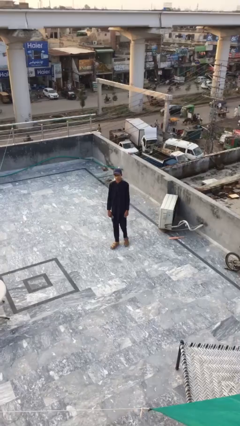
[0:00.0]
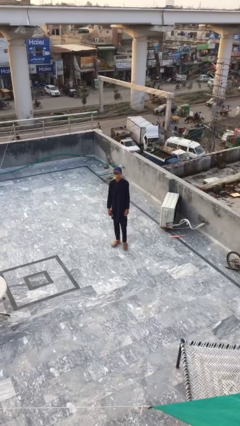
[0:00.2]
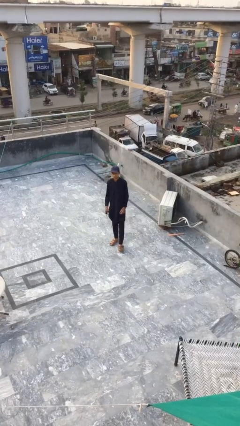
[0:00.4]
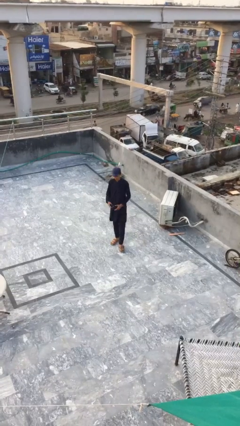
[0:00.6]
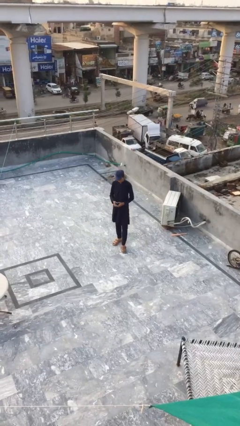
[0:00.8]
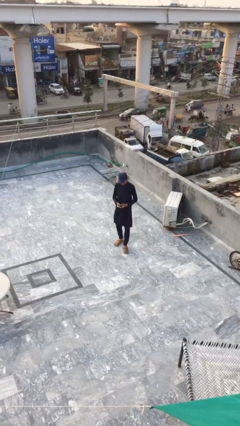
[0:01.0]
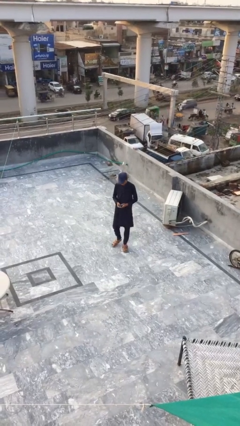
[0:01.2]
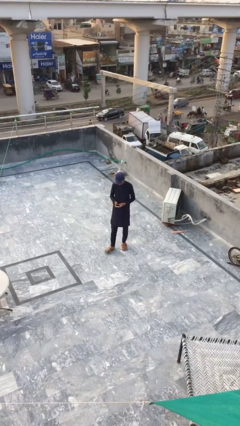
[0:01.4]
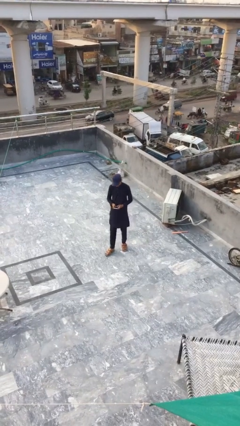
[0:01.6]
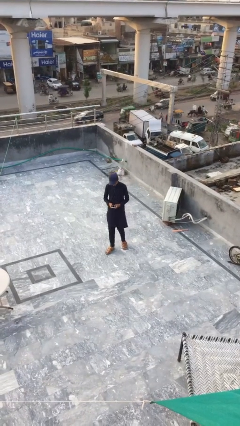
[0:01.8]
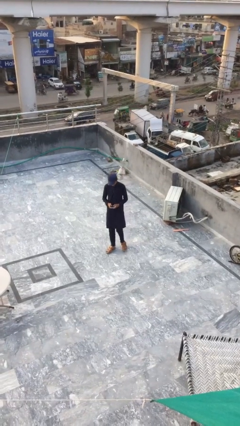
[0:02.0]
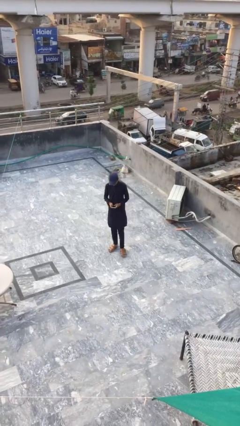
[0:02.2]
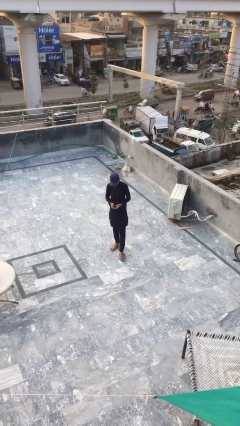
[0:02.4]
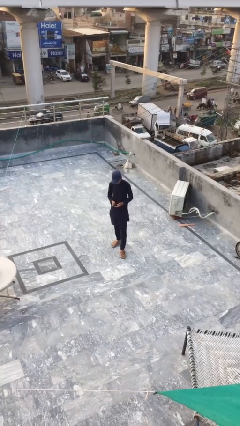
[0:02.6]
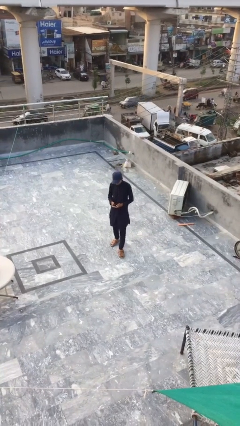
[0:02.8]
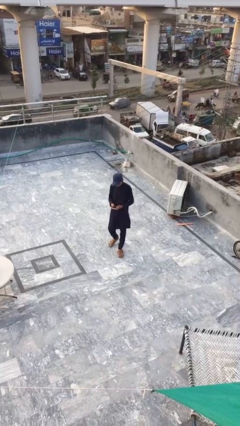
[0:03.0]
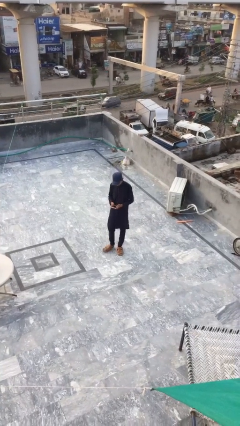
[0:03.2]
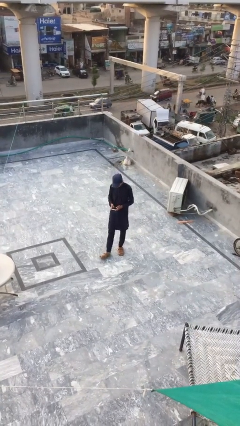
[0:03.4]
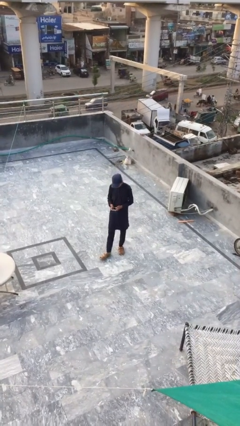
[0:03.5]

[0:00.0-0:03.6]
person texts on phone

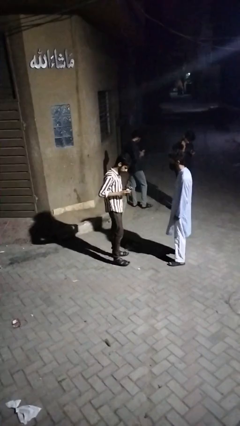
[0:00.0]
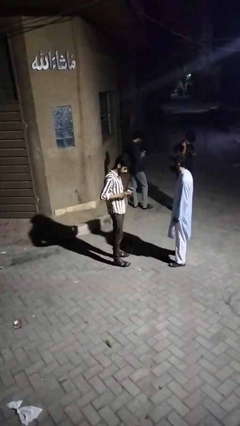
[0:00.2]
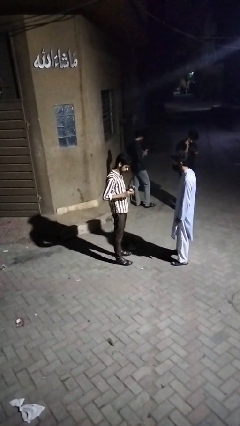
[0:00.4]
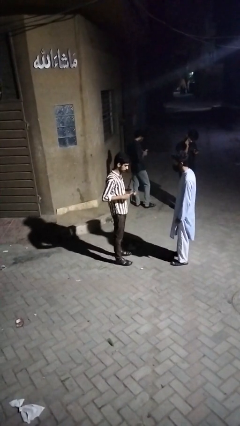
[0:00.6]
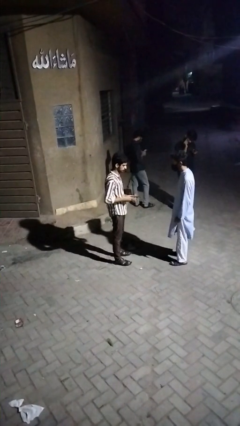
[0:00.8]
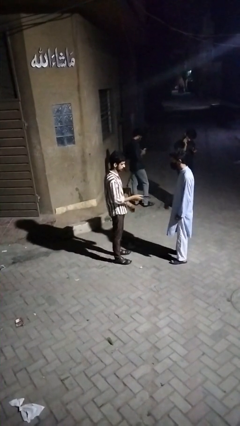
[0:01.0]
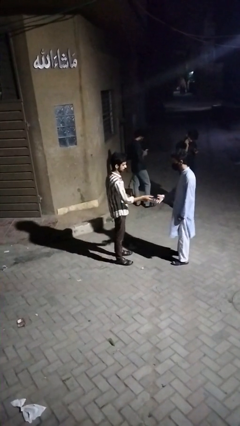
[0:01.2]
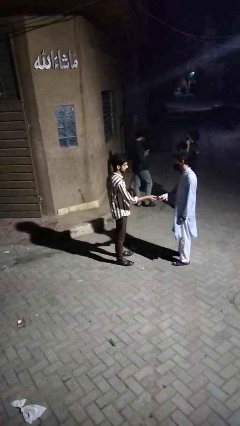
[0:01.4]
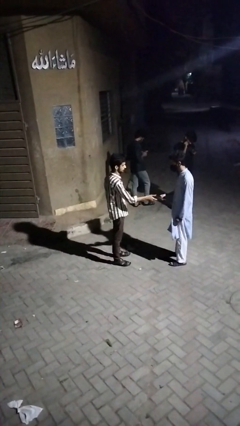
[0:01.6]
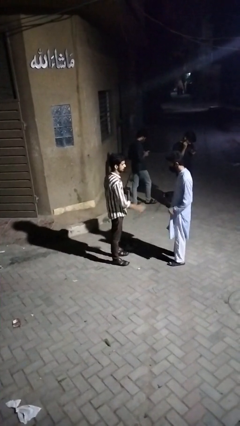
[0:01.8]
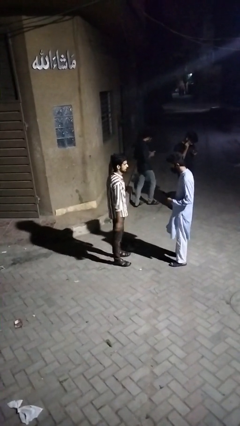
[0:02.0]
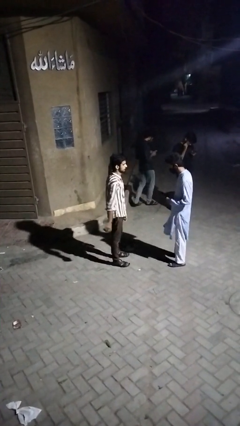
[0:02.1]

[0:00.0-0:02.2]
person transfers object to person

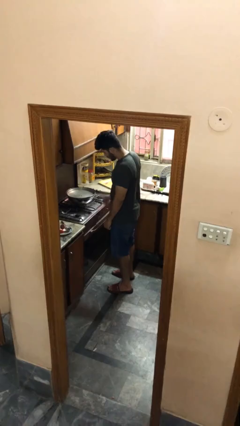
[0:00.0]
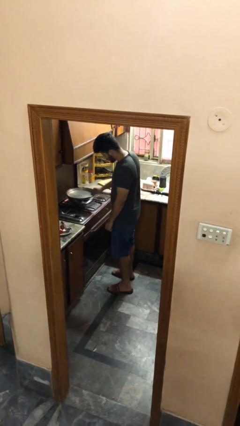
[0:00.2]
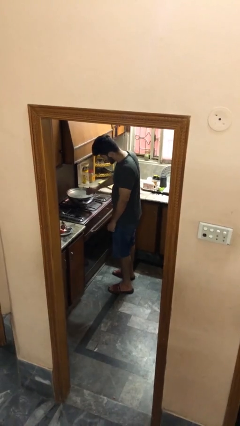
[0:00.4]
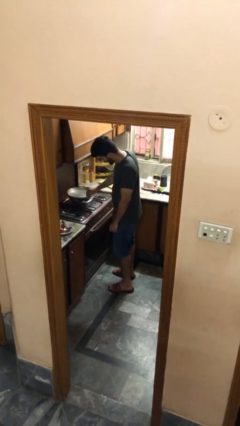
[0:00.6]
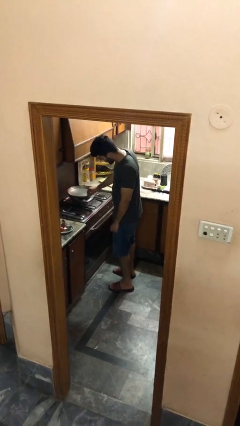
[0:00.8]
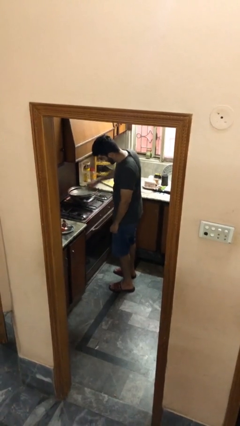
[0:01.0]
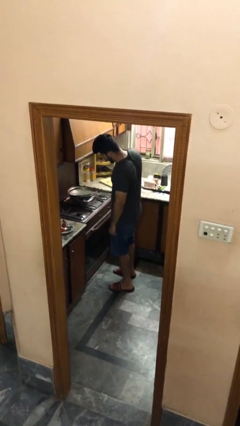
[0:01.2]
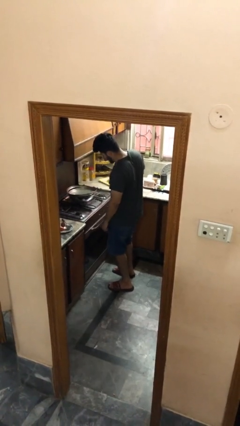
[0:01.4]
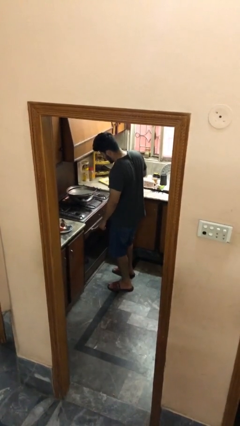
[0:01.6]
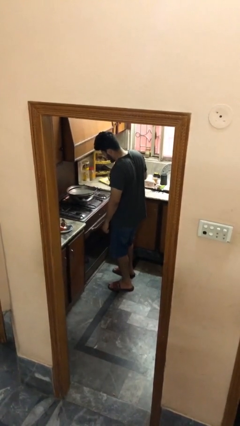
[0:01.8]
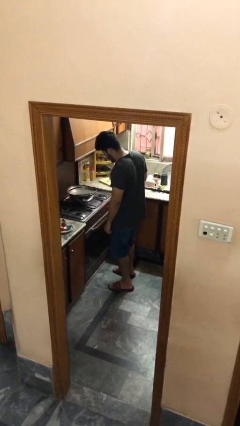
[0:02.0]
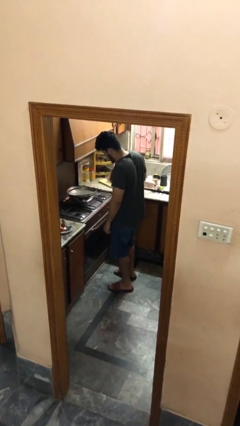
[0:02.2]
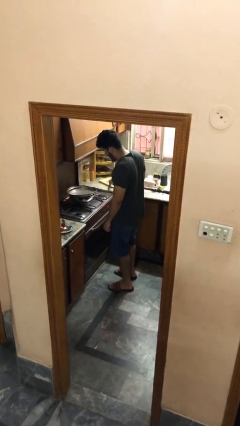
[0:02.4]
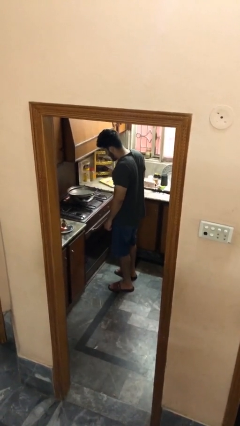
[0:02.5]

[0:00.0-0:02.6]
person burns hand

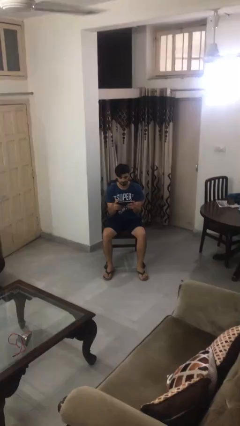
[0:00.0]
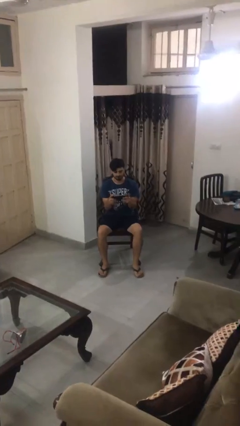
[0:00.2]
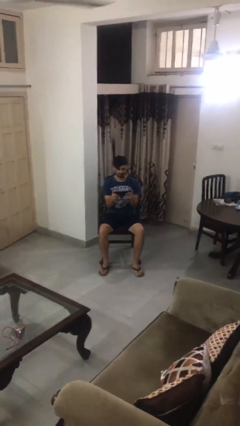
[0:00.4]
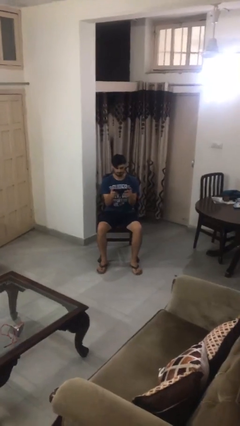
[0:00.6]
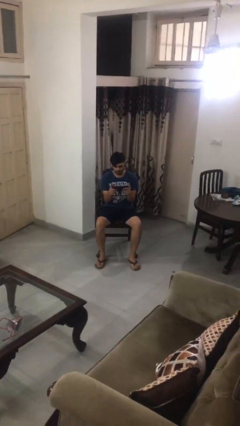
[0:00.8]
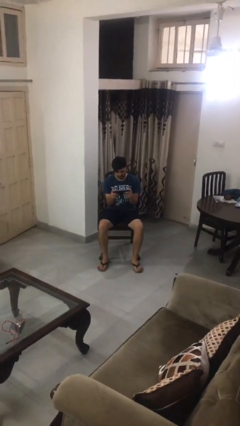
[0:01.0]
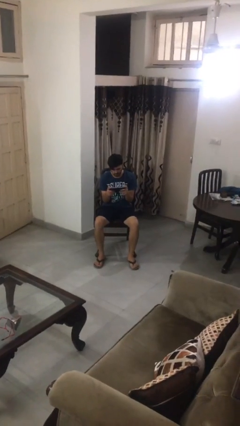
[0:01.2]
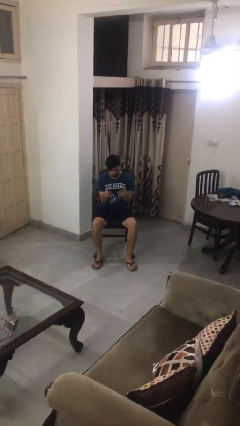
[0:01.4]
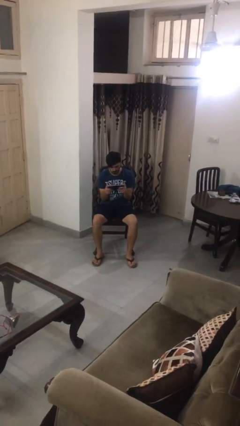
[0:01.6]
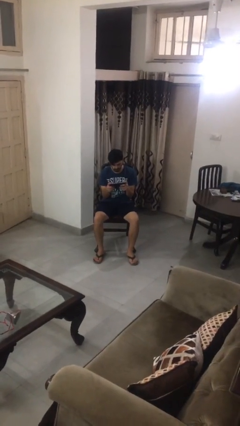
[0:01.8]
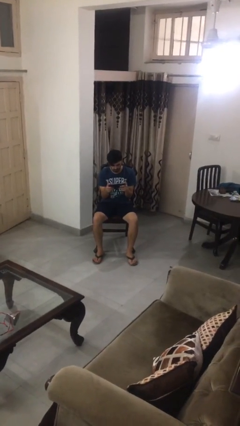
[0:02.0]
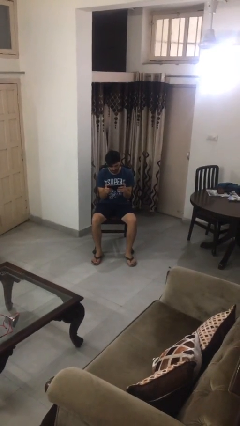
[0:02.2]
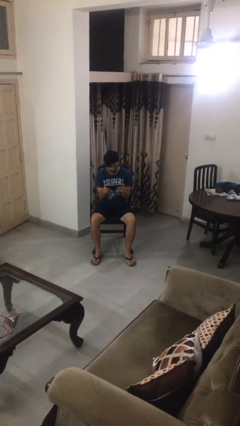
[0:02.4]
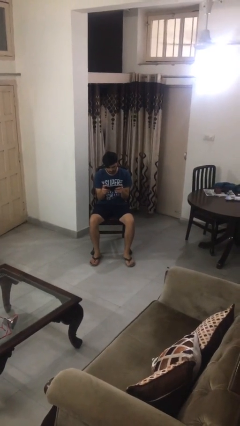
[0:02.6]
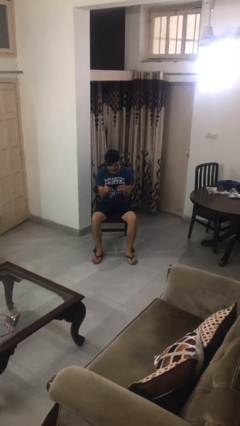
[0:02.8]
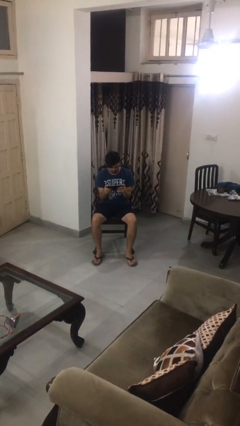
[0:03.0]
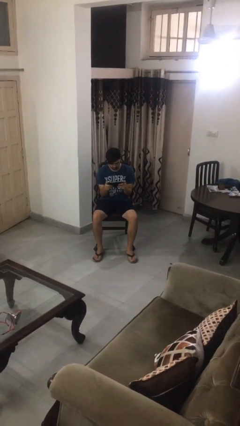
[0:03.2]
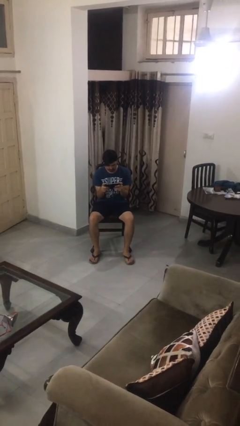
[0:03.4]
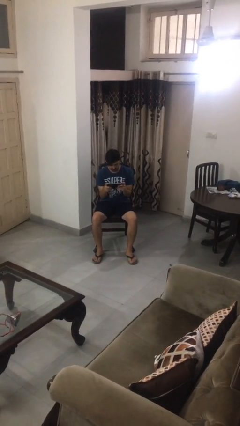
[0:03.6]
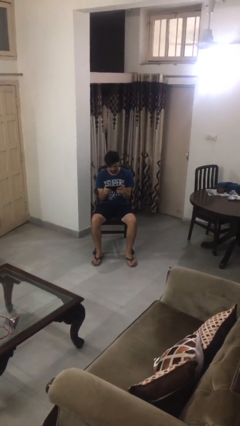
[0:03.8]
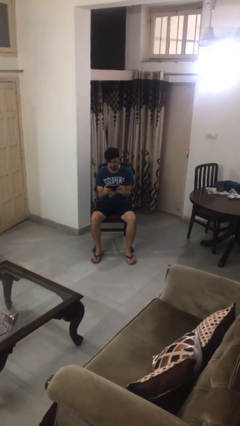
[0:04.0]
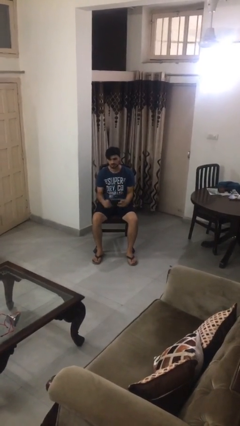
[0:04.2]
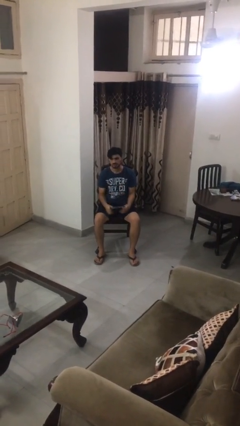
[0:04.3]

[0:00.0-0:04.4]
person interacts with handheld game

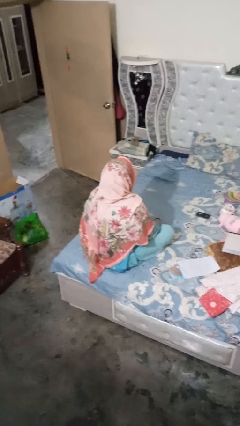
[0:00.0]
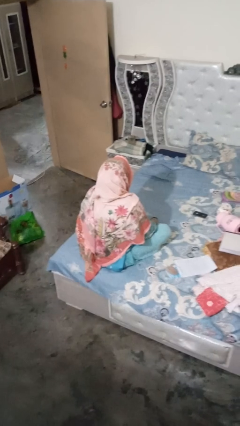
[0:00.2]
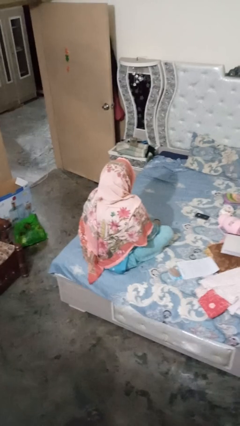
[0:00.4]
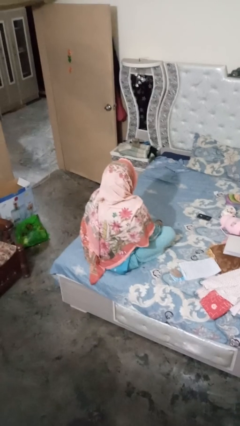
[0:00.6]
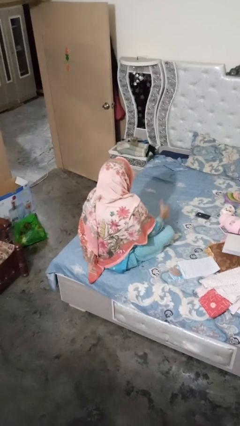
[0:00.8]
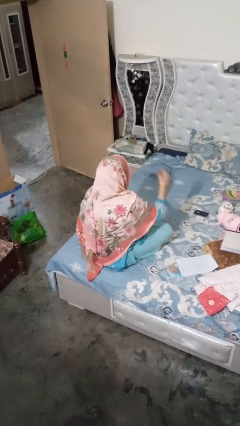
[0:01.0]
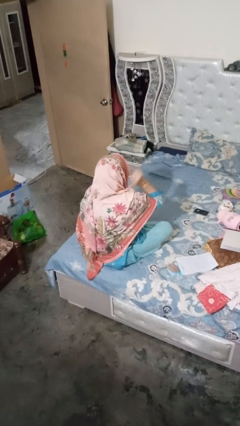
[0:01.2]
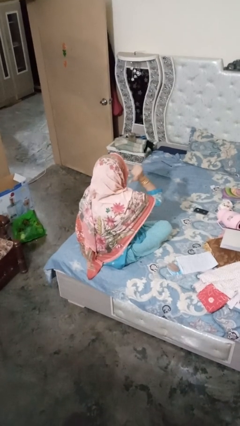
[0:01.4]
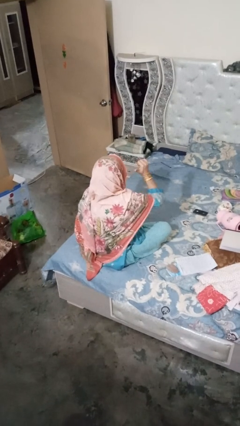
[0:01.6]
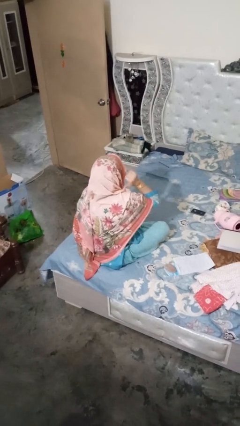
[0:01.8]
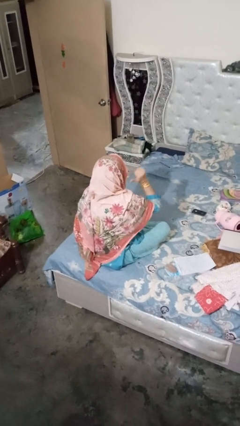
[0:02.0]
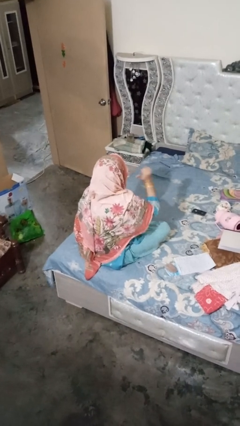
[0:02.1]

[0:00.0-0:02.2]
person gestures behind me

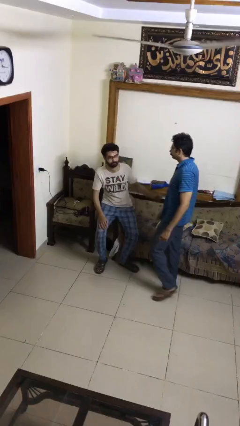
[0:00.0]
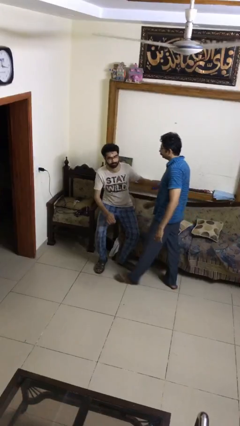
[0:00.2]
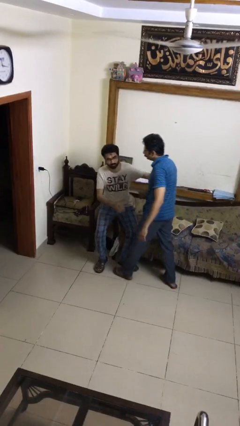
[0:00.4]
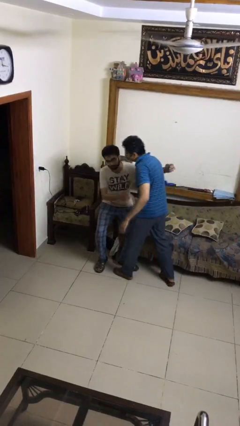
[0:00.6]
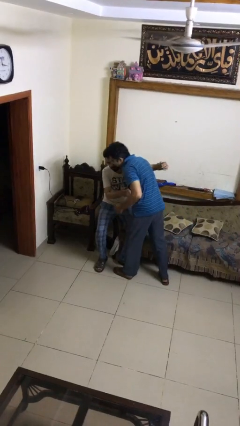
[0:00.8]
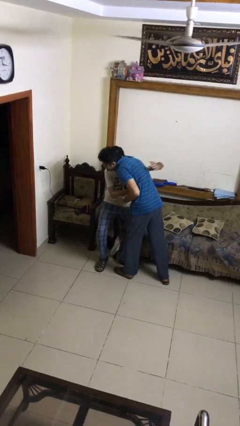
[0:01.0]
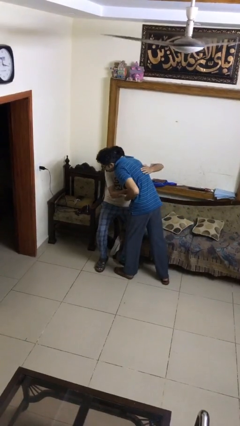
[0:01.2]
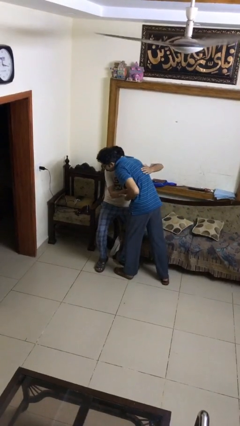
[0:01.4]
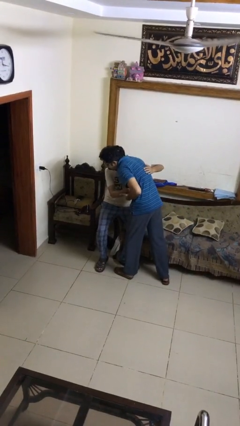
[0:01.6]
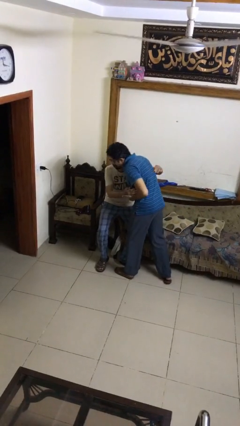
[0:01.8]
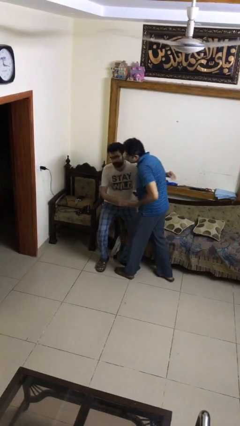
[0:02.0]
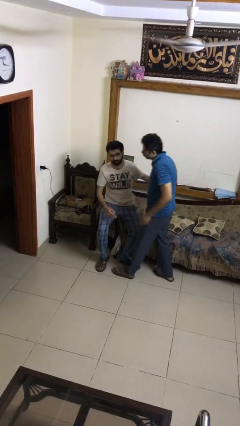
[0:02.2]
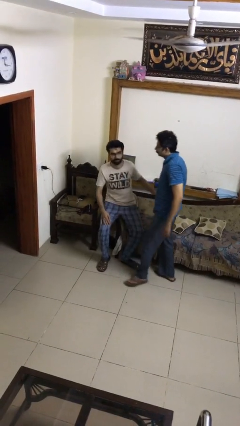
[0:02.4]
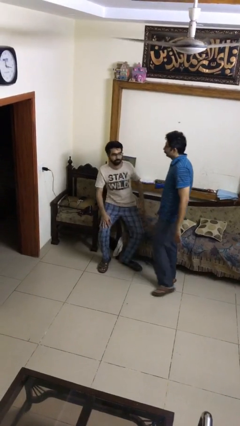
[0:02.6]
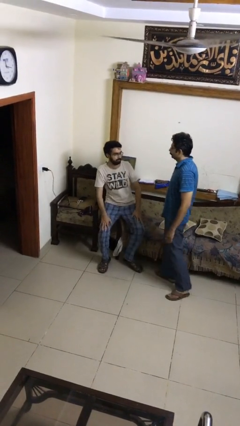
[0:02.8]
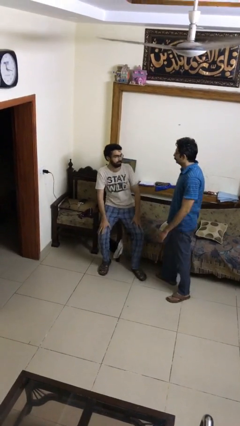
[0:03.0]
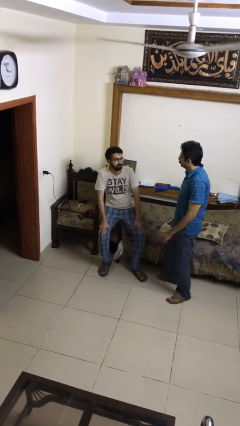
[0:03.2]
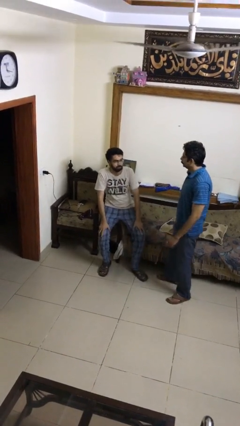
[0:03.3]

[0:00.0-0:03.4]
person embraces person
